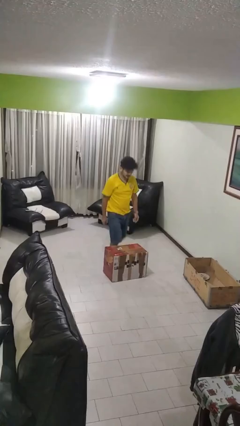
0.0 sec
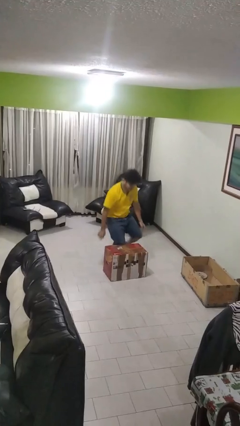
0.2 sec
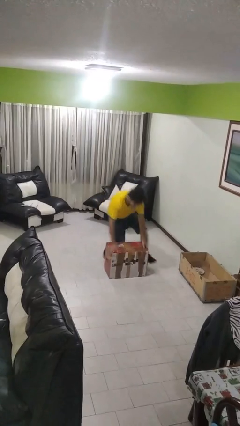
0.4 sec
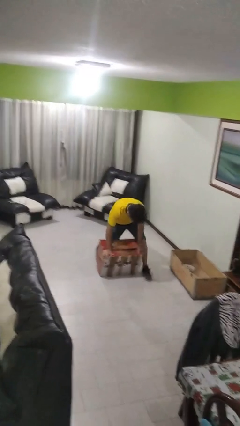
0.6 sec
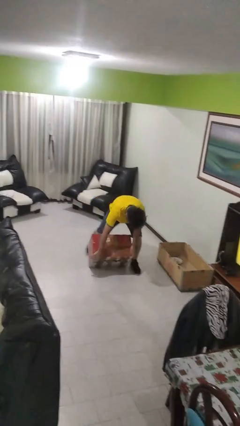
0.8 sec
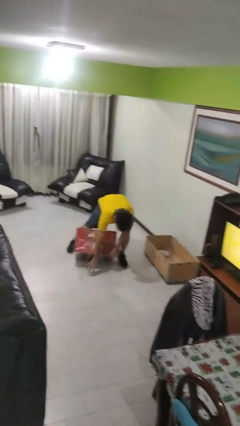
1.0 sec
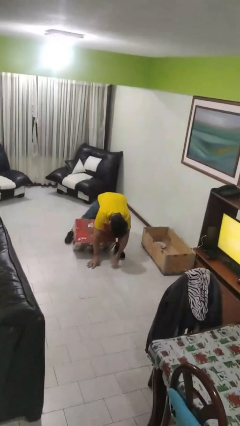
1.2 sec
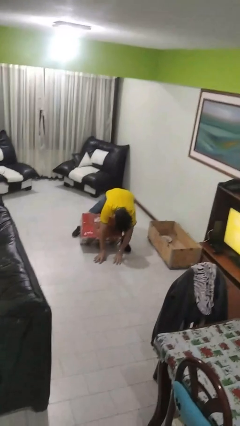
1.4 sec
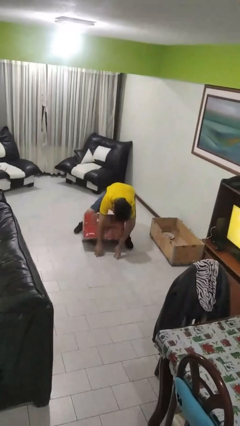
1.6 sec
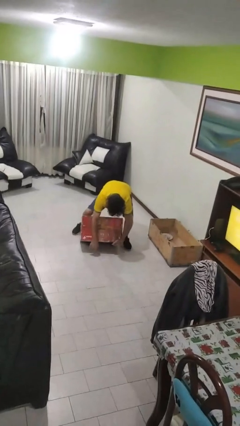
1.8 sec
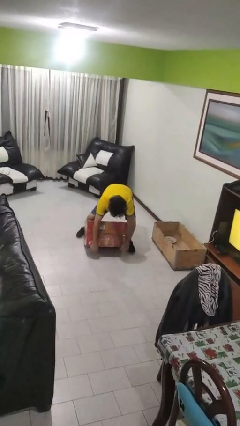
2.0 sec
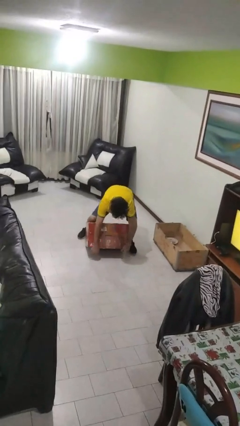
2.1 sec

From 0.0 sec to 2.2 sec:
person trips on object on floor

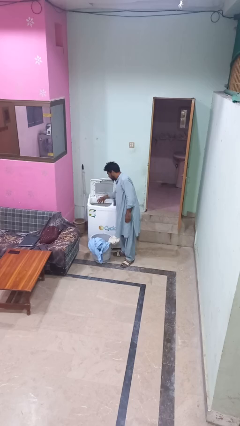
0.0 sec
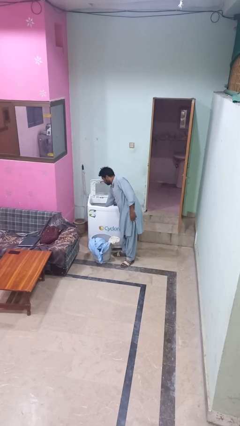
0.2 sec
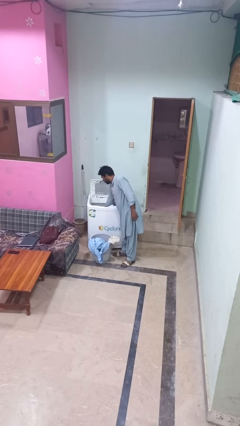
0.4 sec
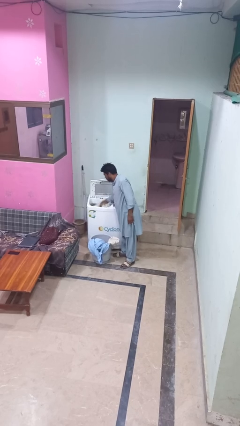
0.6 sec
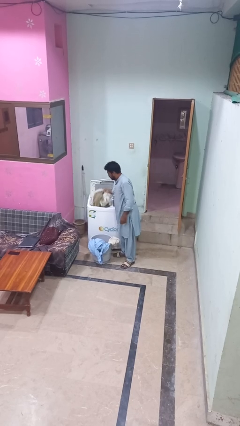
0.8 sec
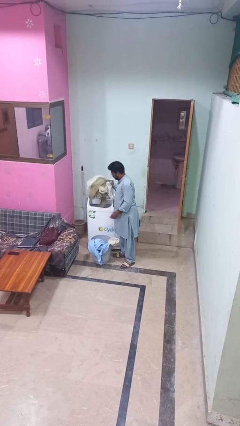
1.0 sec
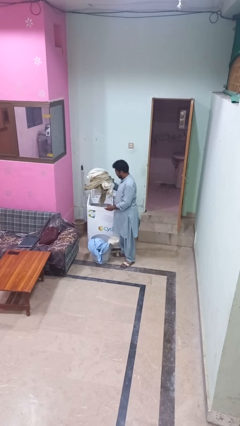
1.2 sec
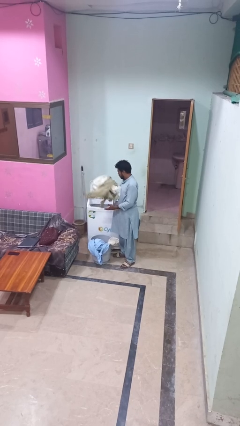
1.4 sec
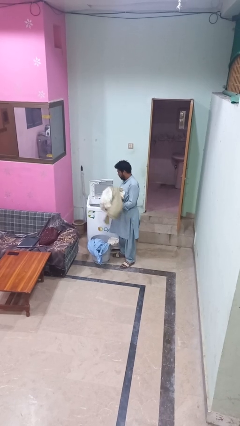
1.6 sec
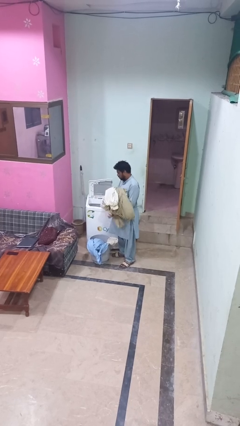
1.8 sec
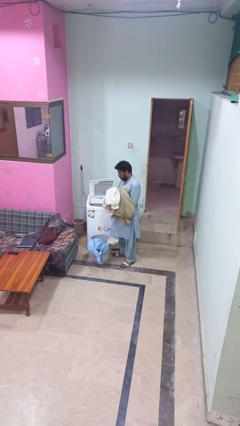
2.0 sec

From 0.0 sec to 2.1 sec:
person unloads clotheswasher

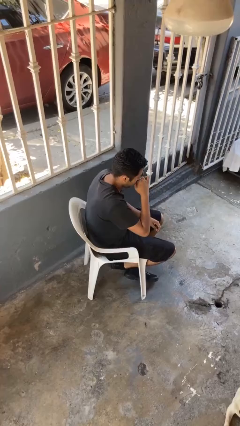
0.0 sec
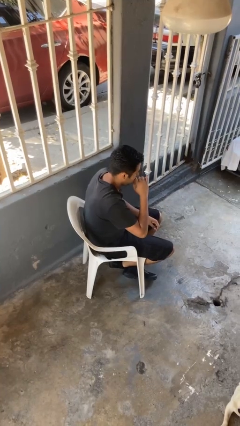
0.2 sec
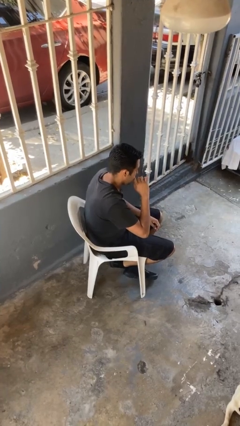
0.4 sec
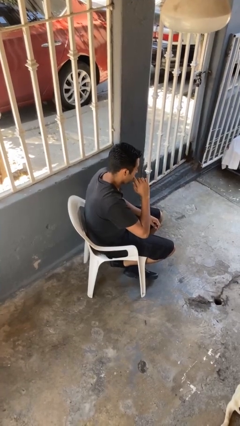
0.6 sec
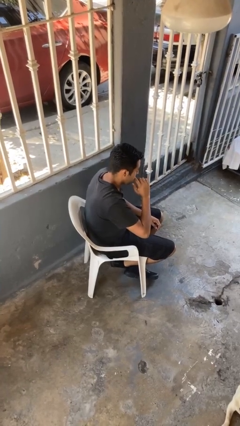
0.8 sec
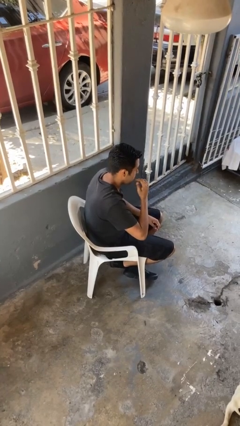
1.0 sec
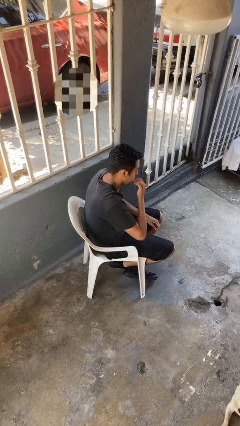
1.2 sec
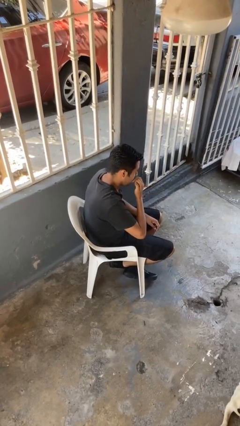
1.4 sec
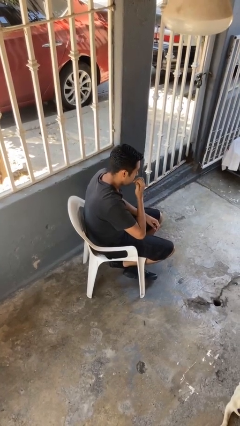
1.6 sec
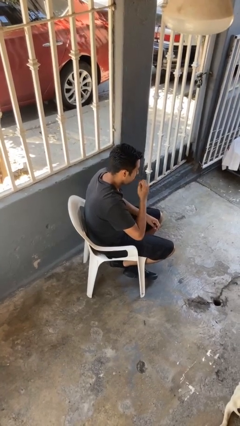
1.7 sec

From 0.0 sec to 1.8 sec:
person licks fingers

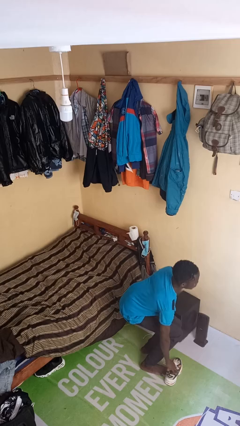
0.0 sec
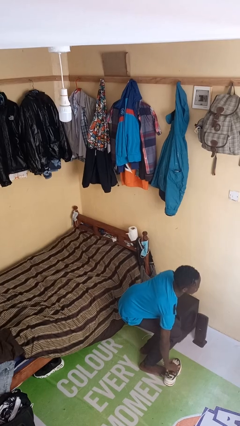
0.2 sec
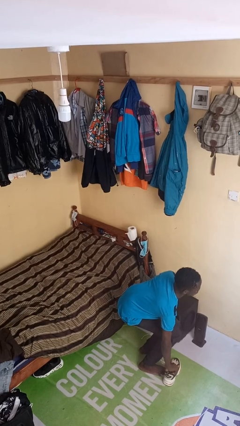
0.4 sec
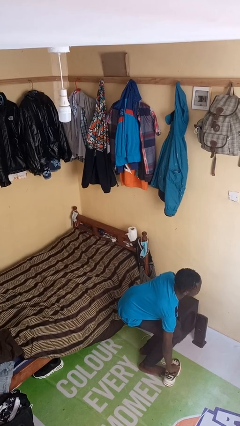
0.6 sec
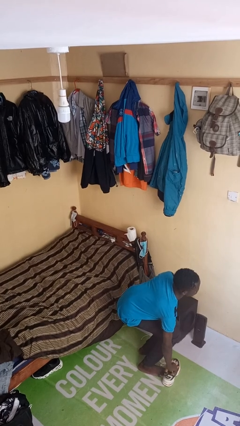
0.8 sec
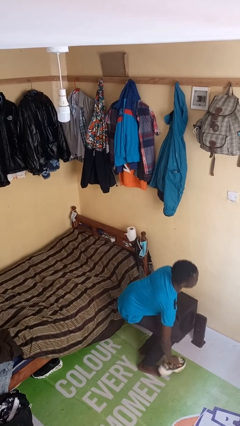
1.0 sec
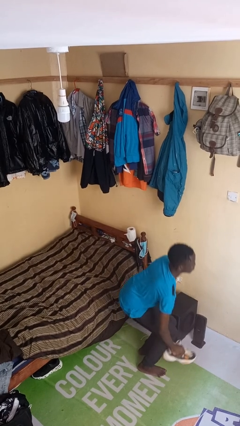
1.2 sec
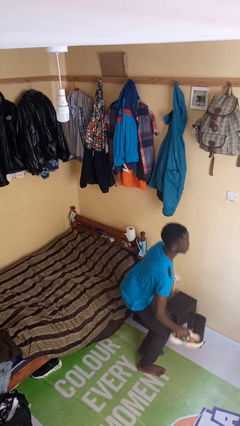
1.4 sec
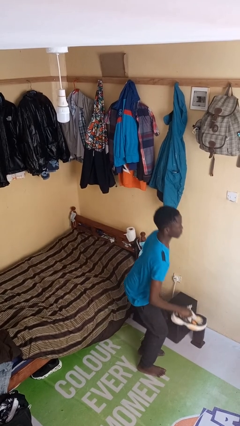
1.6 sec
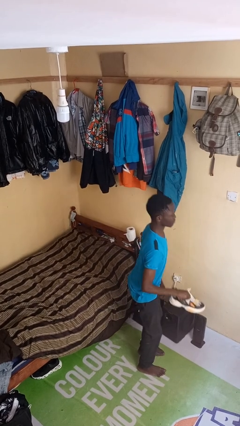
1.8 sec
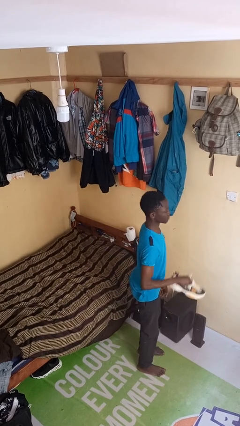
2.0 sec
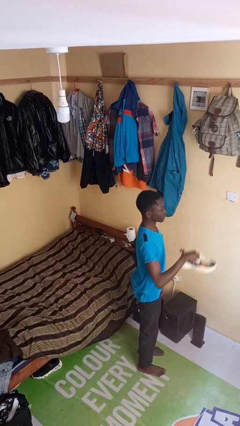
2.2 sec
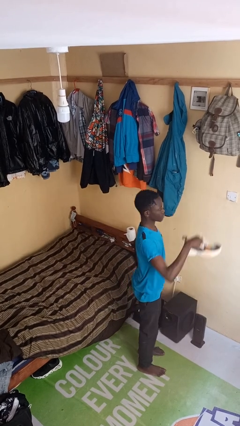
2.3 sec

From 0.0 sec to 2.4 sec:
person picks up object from floor

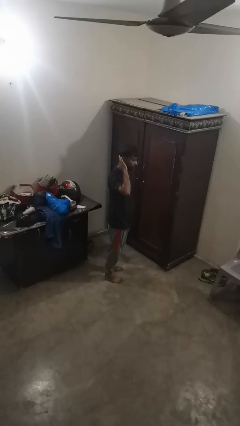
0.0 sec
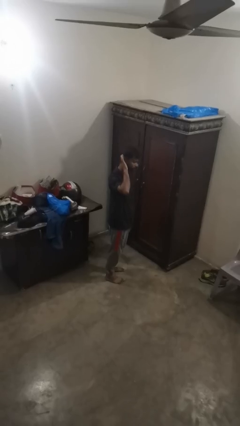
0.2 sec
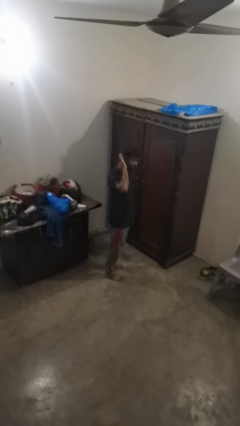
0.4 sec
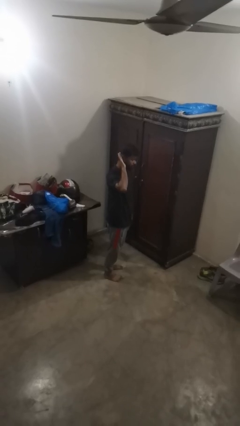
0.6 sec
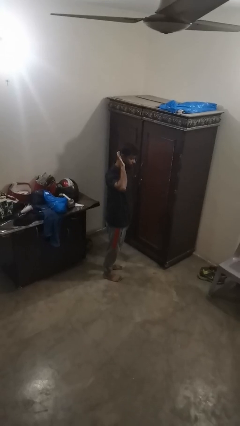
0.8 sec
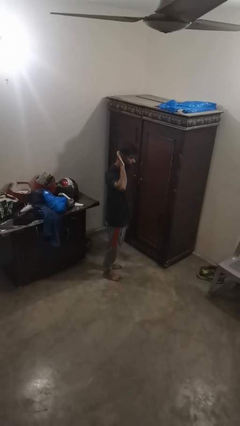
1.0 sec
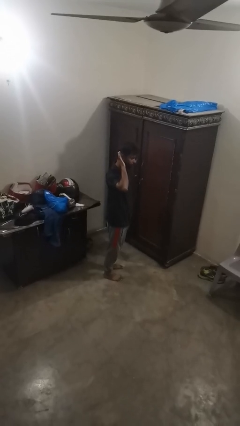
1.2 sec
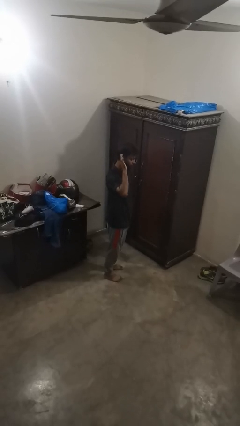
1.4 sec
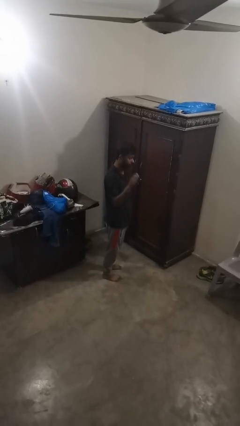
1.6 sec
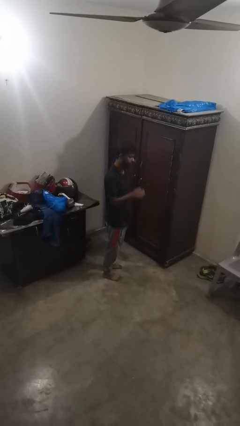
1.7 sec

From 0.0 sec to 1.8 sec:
person gestures listen closely

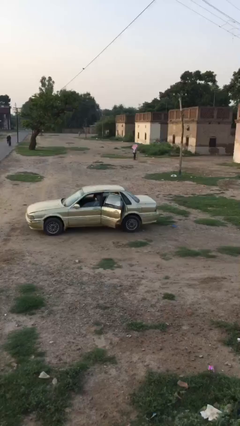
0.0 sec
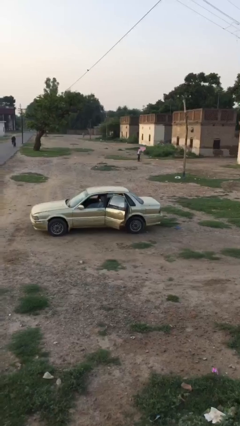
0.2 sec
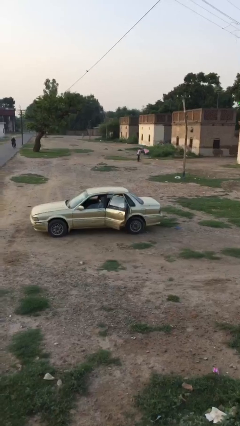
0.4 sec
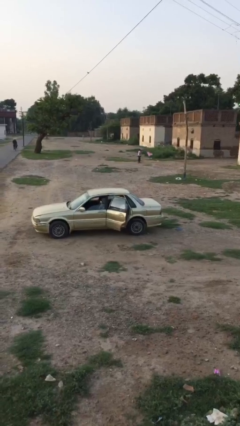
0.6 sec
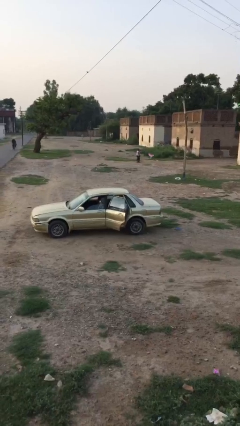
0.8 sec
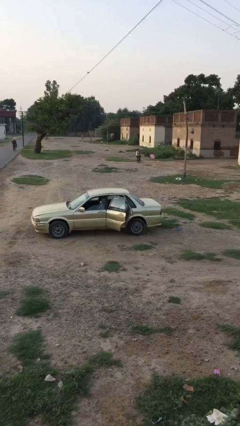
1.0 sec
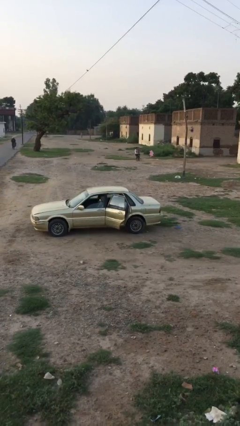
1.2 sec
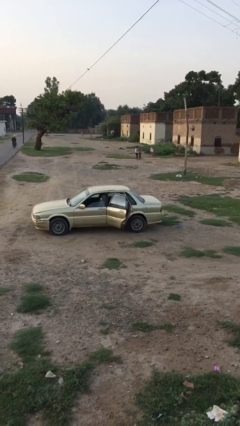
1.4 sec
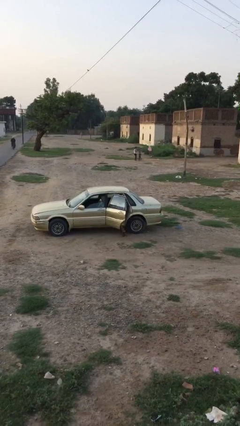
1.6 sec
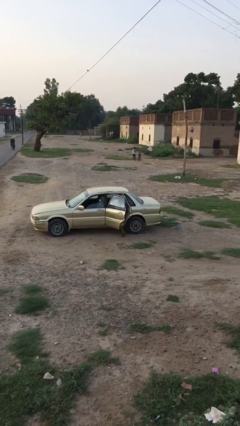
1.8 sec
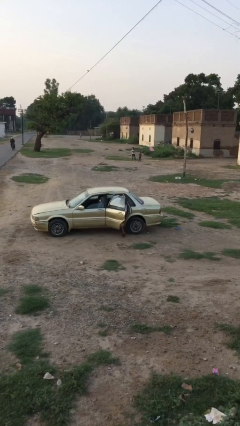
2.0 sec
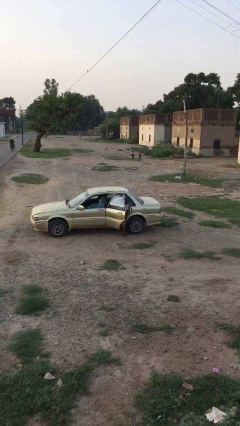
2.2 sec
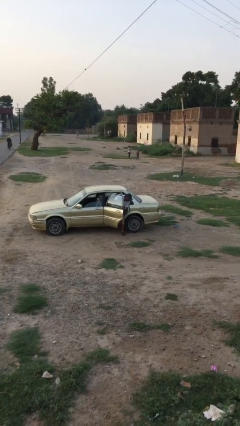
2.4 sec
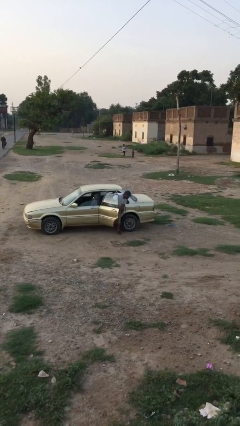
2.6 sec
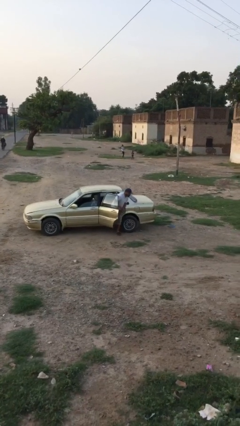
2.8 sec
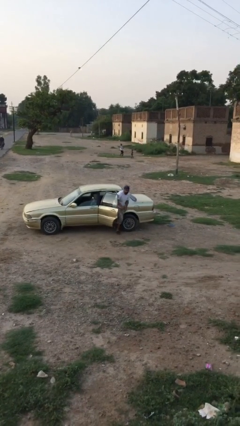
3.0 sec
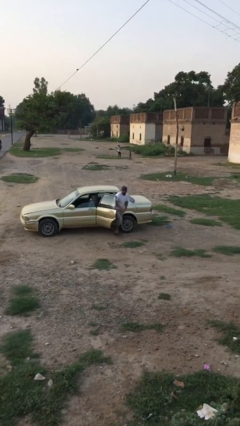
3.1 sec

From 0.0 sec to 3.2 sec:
person exits car

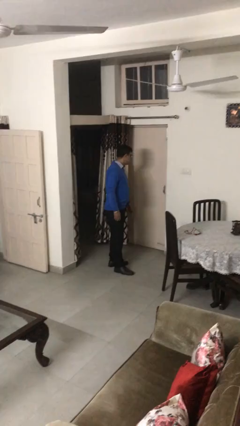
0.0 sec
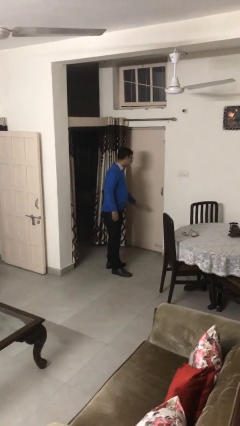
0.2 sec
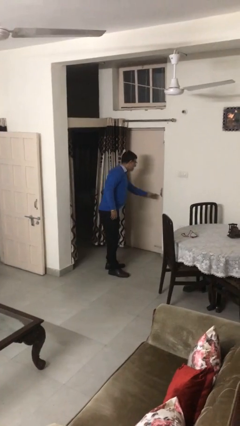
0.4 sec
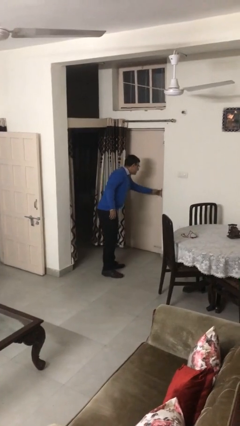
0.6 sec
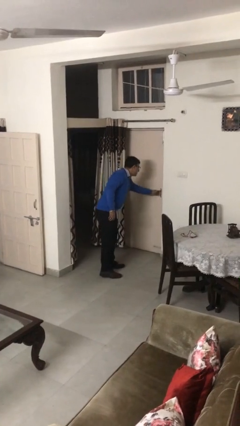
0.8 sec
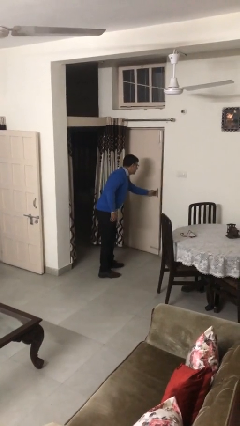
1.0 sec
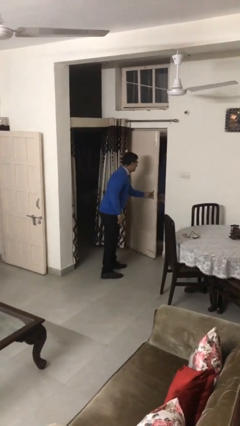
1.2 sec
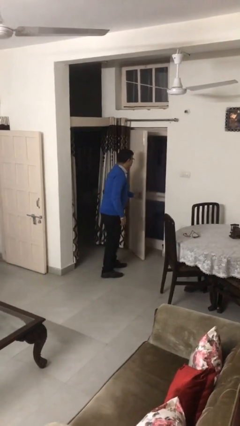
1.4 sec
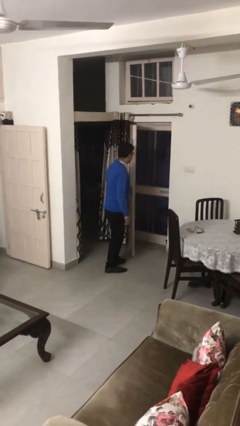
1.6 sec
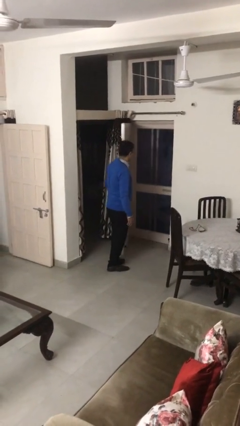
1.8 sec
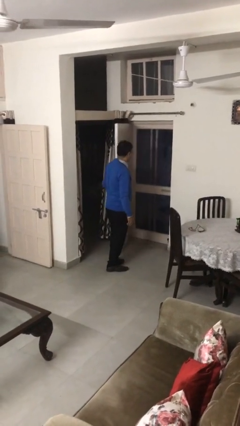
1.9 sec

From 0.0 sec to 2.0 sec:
person opens facility door

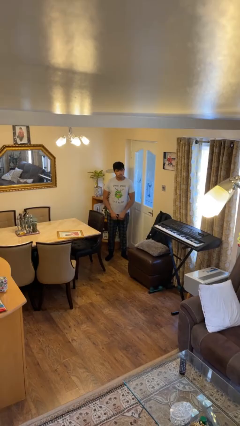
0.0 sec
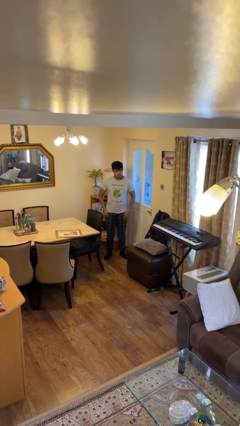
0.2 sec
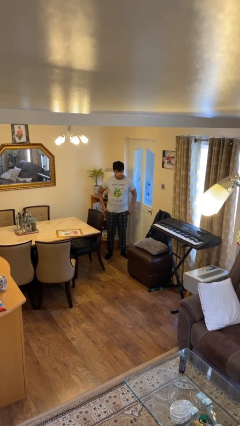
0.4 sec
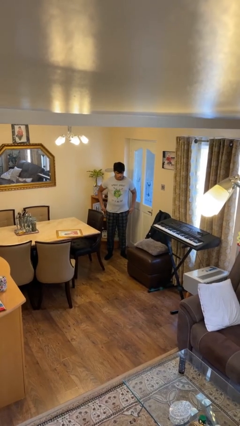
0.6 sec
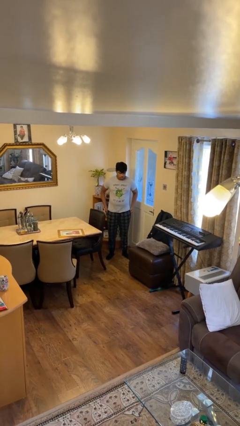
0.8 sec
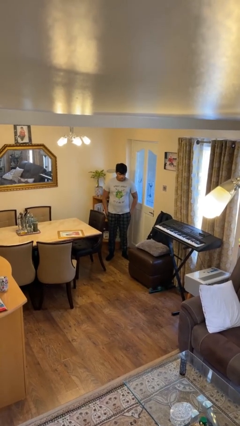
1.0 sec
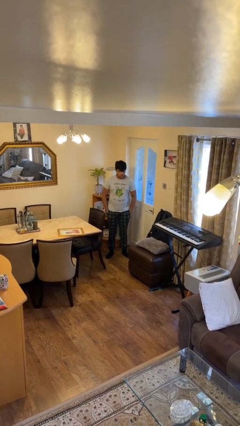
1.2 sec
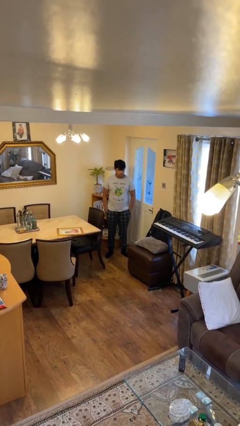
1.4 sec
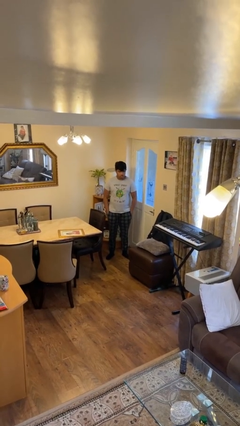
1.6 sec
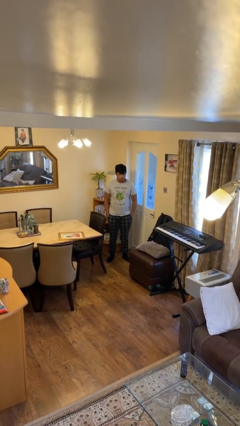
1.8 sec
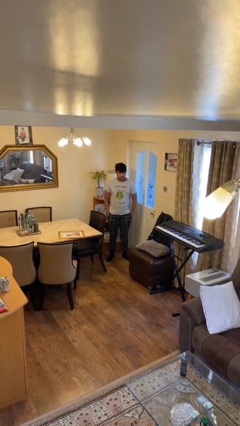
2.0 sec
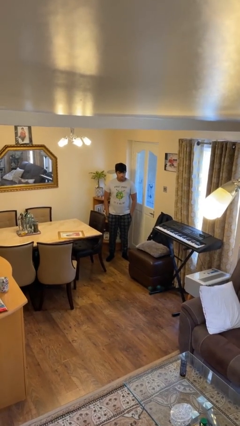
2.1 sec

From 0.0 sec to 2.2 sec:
person puts hands in back pockets
